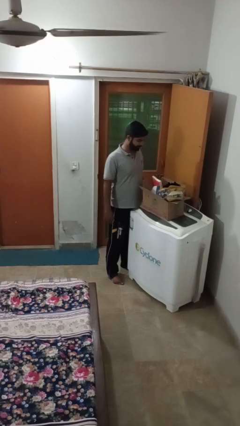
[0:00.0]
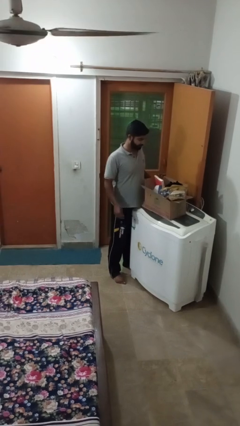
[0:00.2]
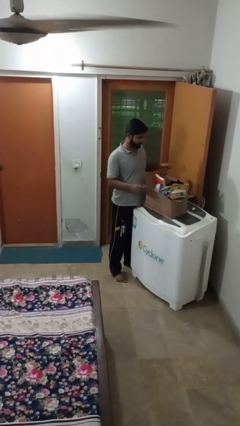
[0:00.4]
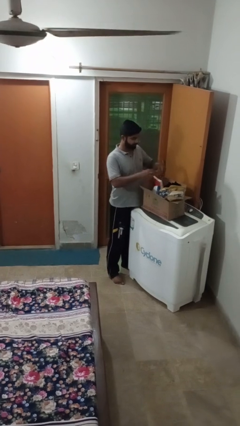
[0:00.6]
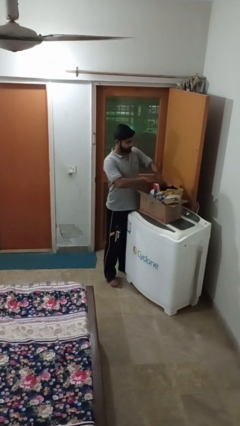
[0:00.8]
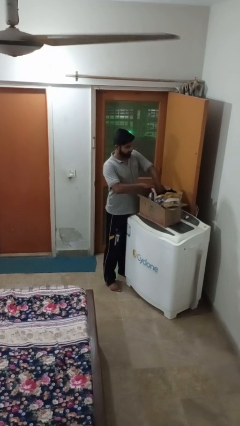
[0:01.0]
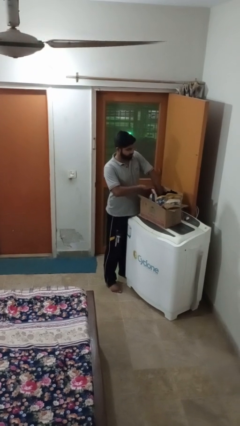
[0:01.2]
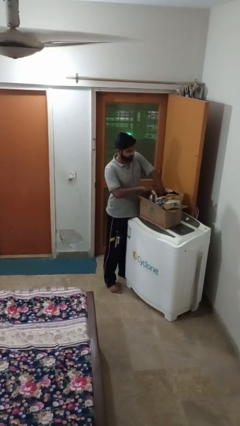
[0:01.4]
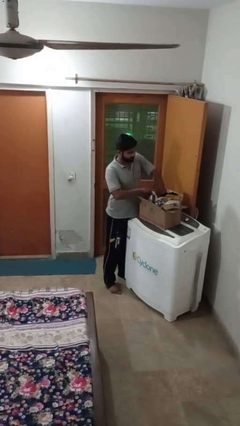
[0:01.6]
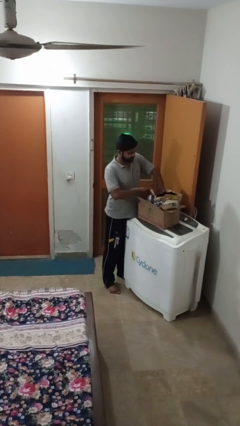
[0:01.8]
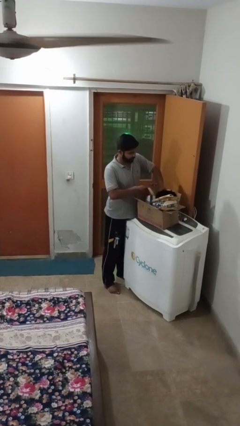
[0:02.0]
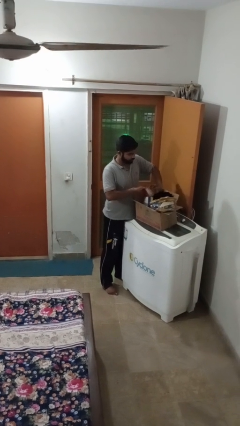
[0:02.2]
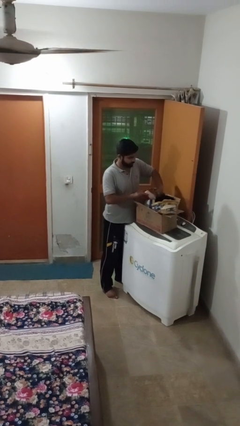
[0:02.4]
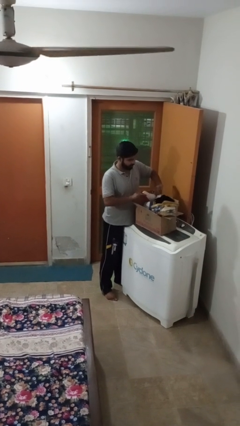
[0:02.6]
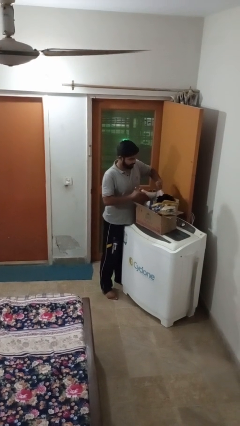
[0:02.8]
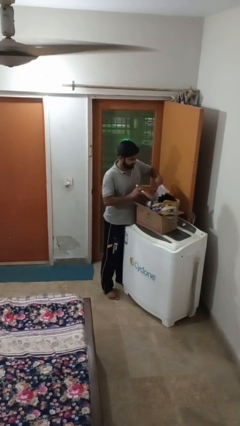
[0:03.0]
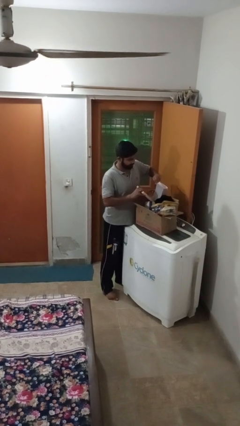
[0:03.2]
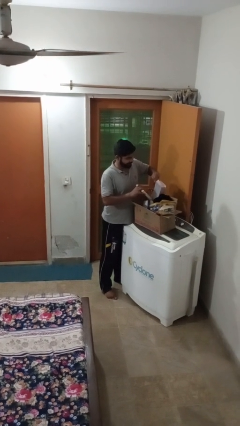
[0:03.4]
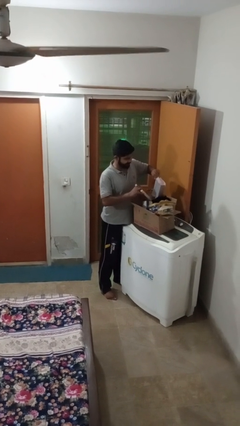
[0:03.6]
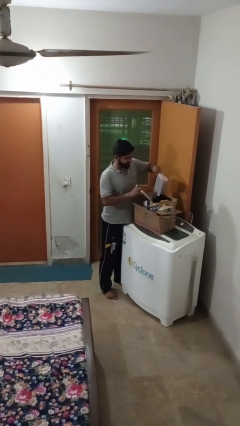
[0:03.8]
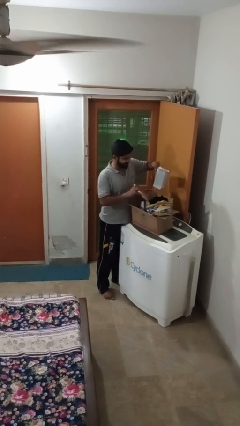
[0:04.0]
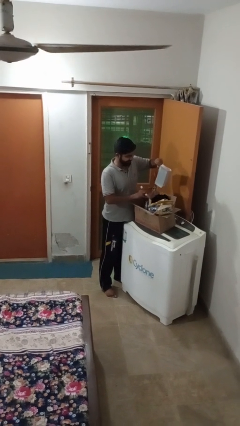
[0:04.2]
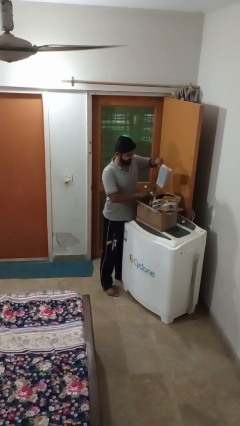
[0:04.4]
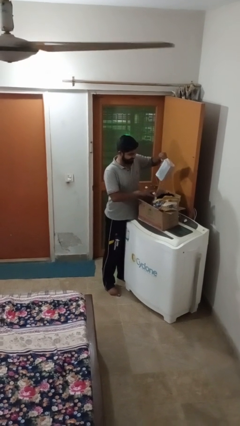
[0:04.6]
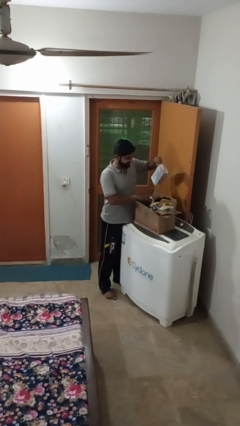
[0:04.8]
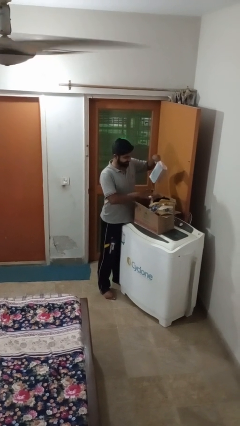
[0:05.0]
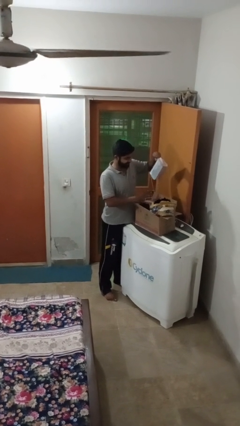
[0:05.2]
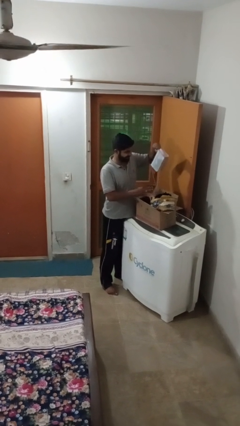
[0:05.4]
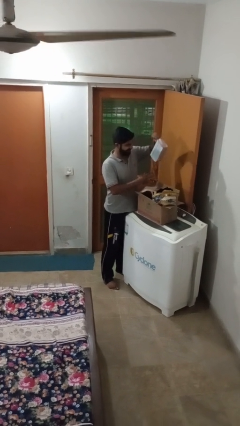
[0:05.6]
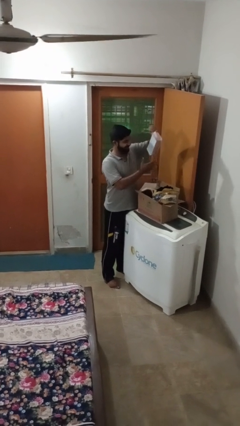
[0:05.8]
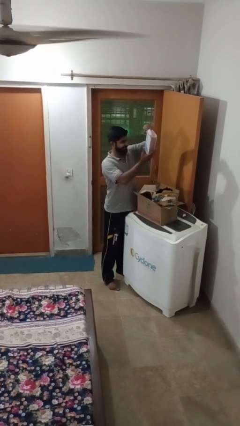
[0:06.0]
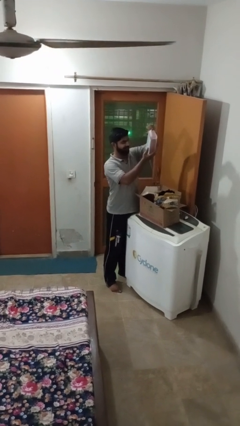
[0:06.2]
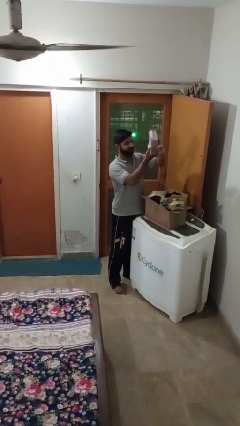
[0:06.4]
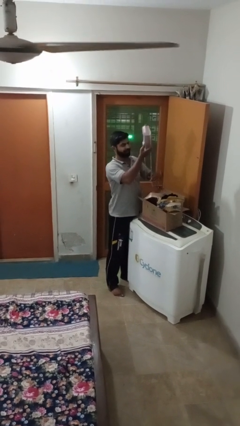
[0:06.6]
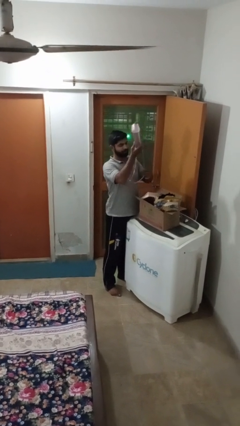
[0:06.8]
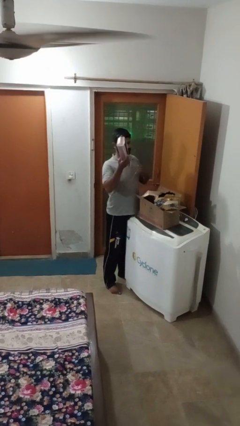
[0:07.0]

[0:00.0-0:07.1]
person takes object from box

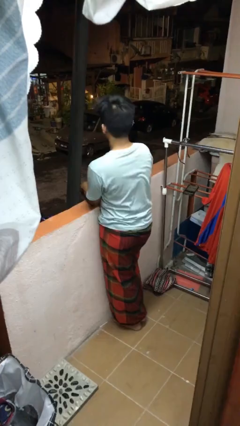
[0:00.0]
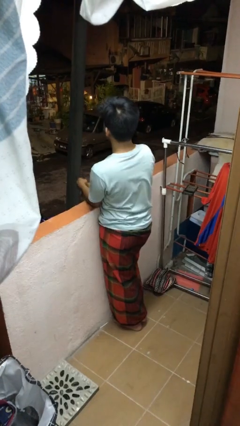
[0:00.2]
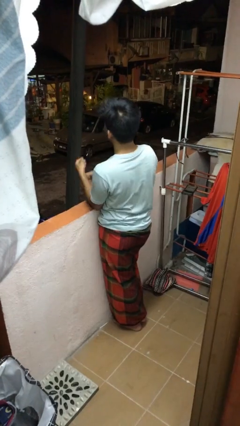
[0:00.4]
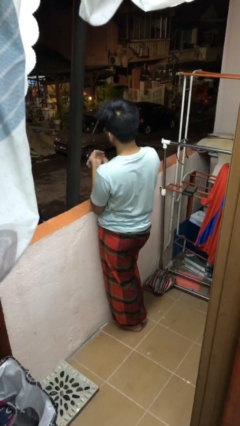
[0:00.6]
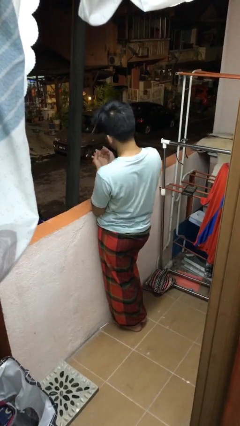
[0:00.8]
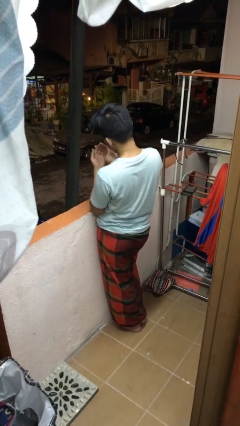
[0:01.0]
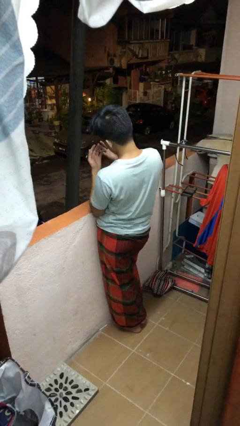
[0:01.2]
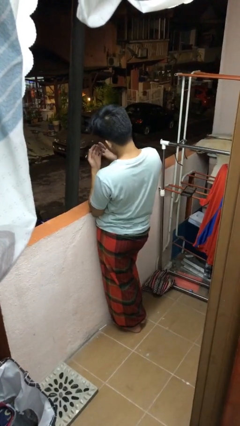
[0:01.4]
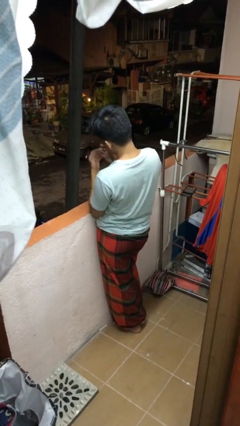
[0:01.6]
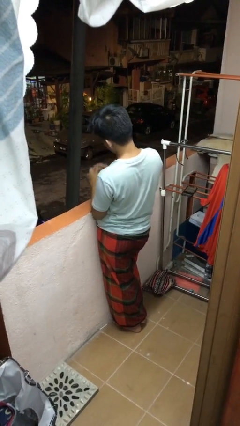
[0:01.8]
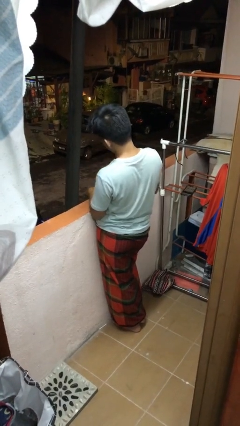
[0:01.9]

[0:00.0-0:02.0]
person prays

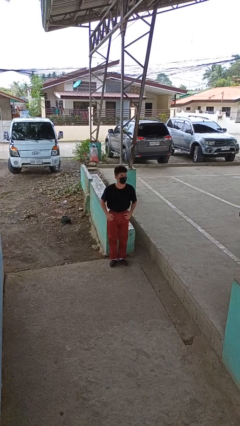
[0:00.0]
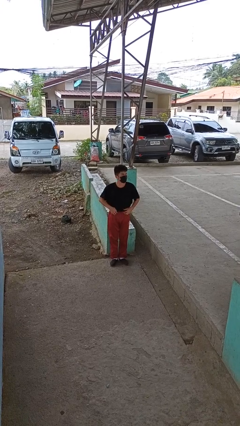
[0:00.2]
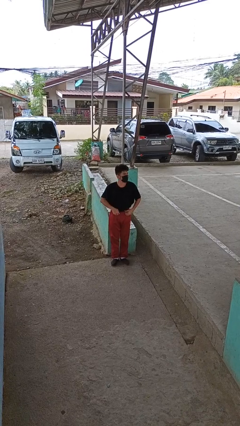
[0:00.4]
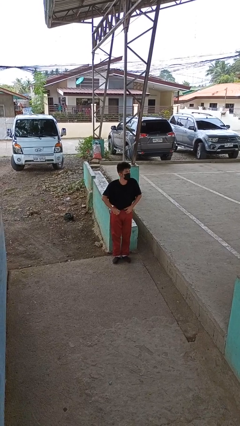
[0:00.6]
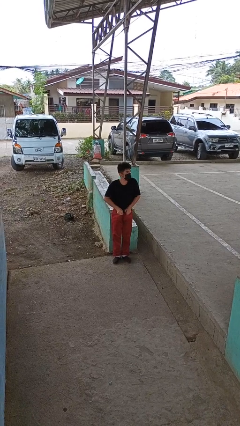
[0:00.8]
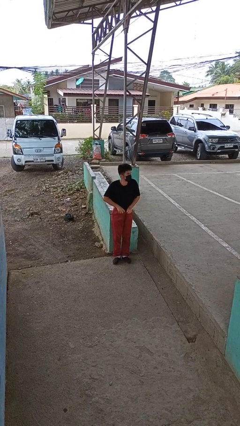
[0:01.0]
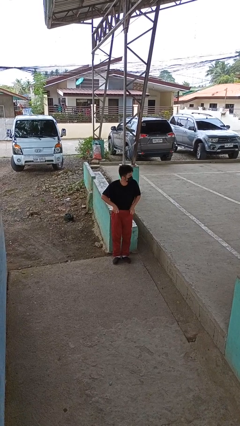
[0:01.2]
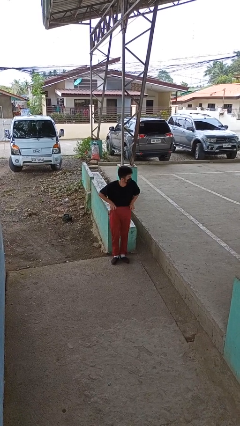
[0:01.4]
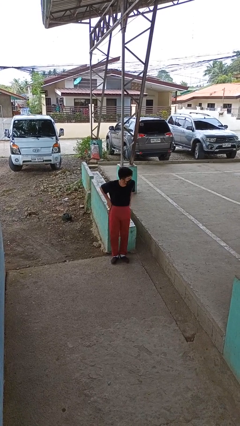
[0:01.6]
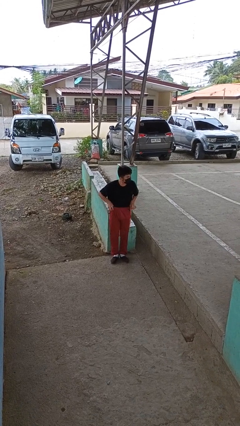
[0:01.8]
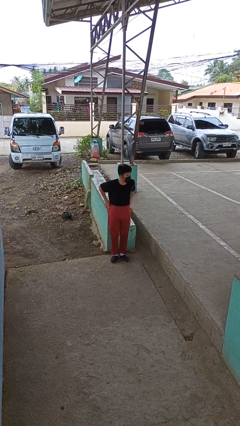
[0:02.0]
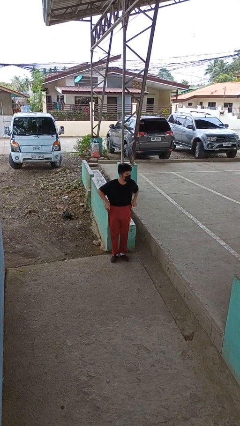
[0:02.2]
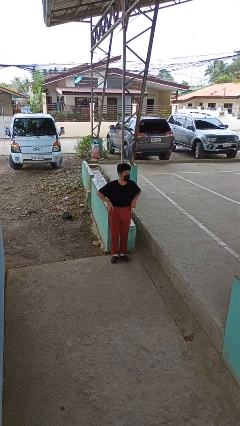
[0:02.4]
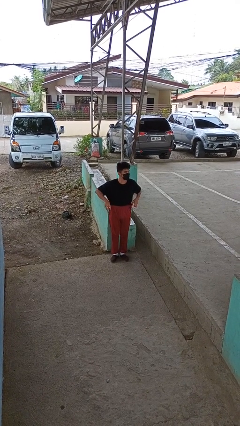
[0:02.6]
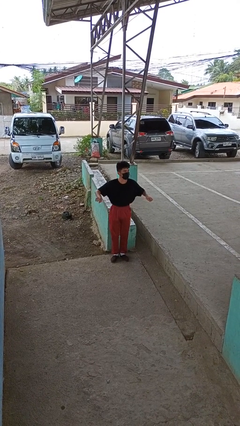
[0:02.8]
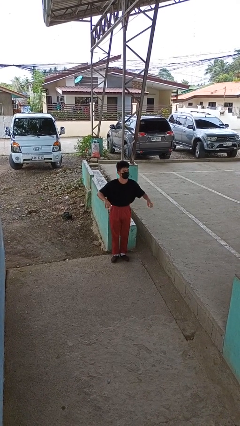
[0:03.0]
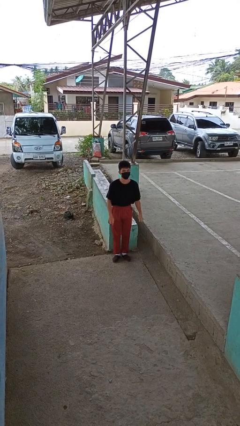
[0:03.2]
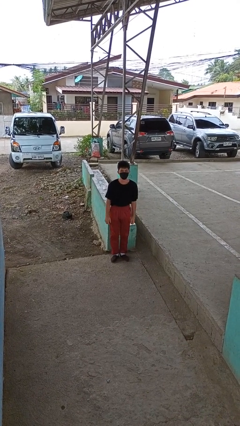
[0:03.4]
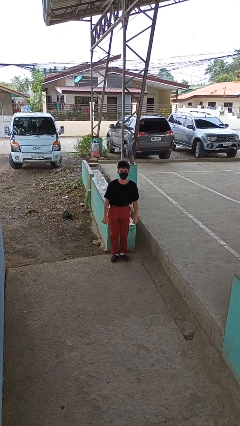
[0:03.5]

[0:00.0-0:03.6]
person hikes up pants

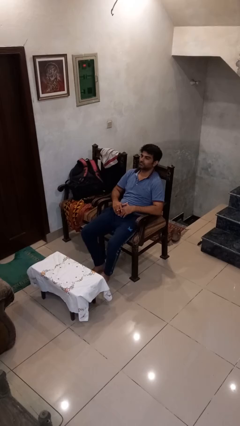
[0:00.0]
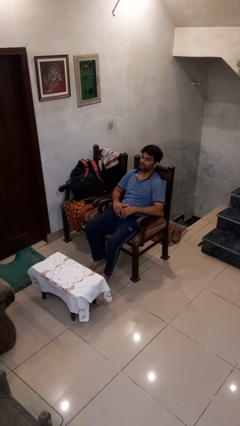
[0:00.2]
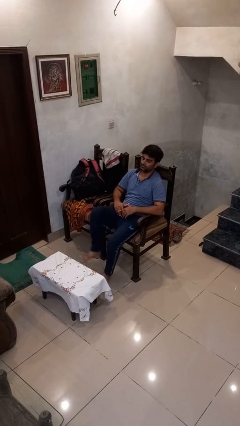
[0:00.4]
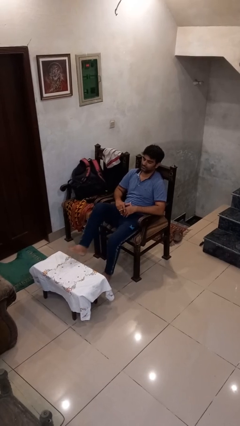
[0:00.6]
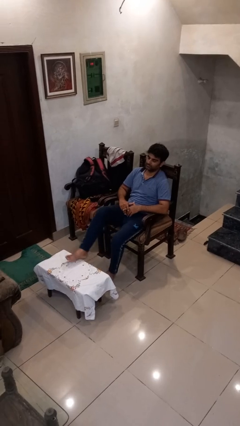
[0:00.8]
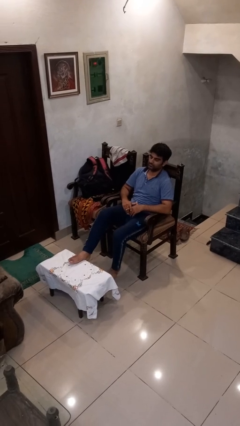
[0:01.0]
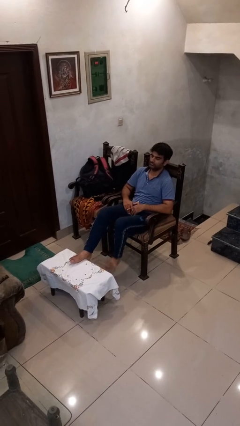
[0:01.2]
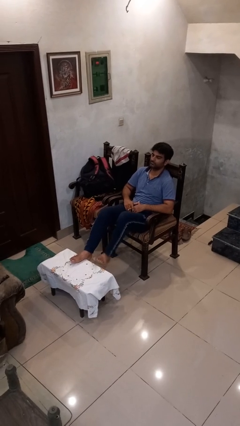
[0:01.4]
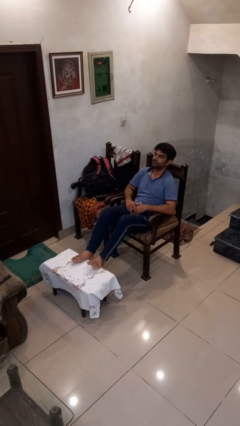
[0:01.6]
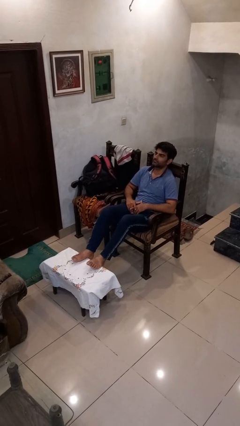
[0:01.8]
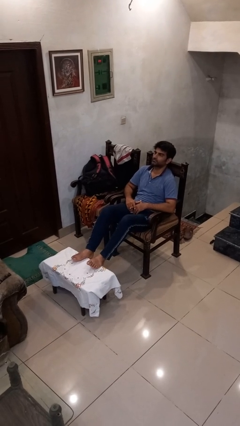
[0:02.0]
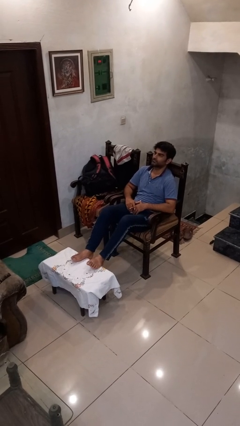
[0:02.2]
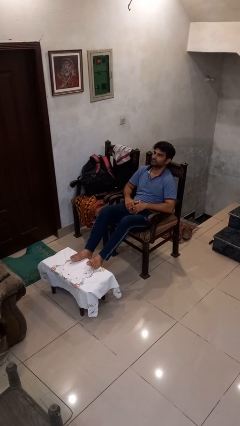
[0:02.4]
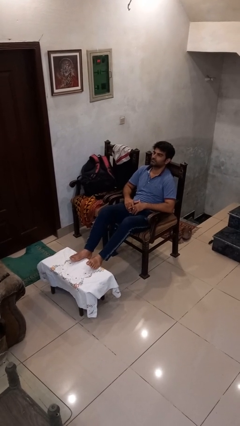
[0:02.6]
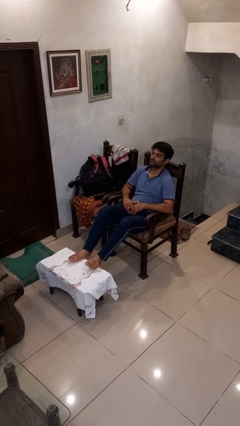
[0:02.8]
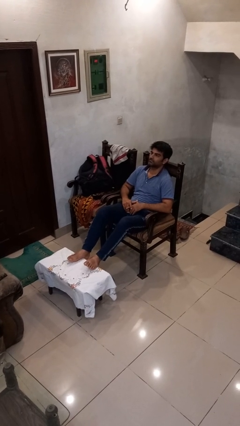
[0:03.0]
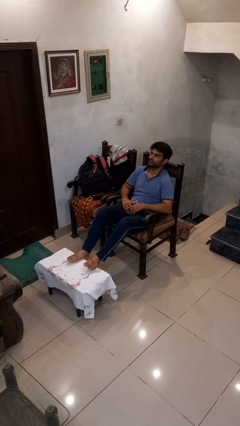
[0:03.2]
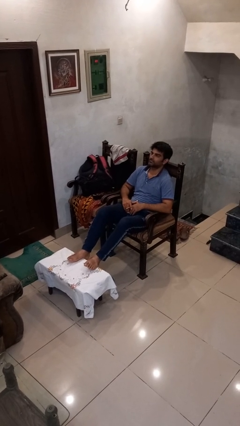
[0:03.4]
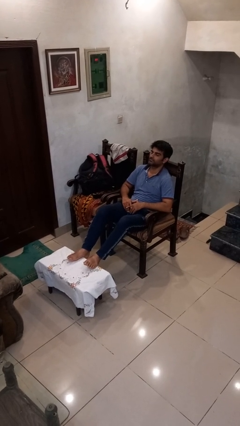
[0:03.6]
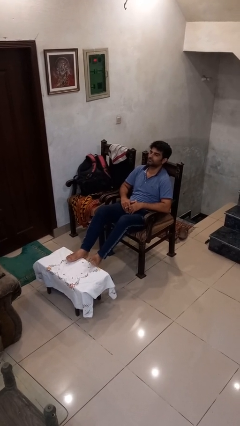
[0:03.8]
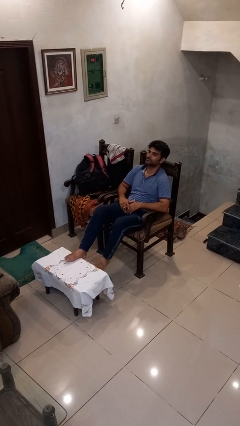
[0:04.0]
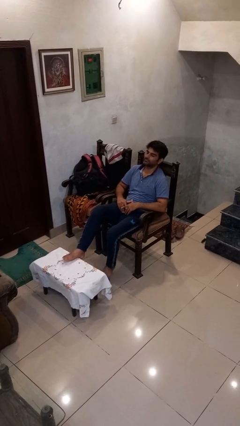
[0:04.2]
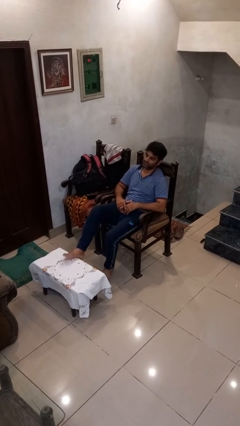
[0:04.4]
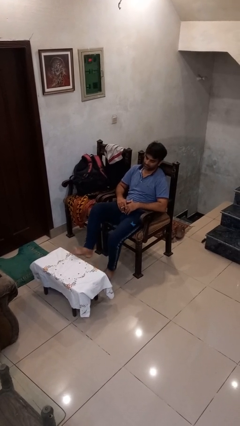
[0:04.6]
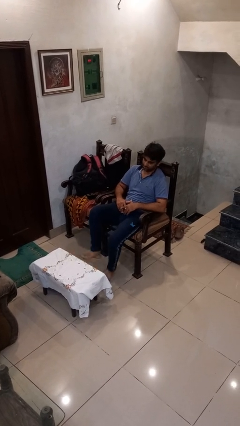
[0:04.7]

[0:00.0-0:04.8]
person puts feet up

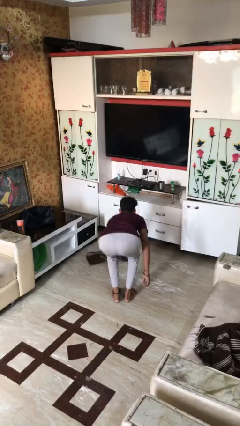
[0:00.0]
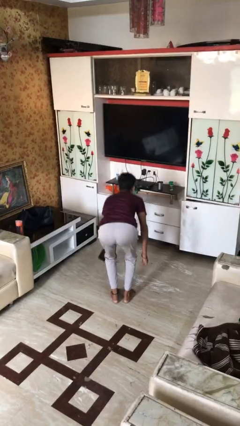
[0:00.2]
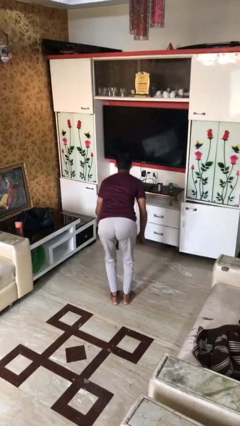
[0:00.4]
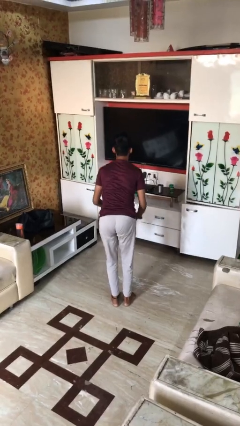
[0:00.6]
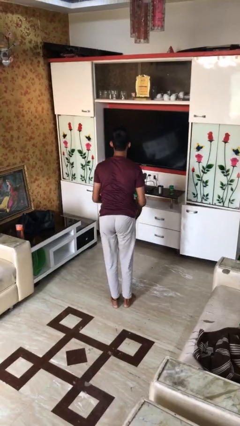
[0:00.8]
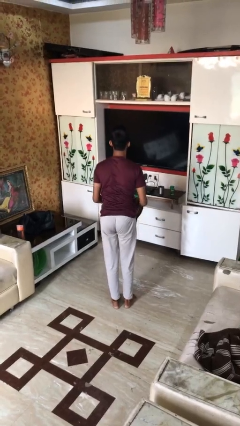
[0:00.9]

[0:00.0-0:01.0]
person picks up object from floor
